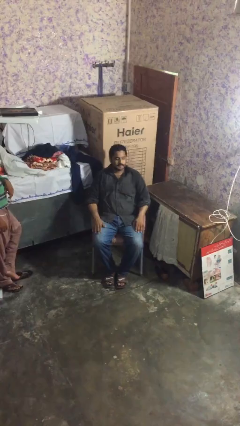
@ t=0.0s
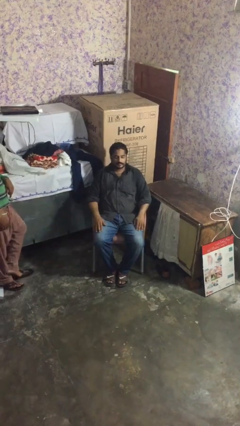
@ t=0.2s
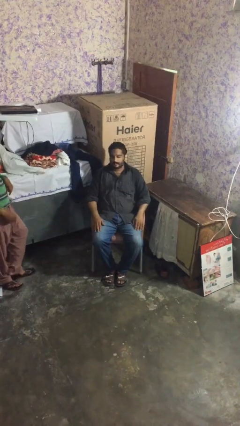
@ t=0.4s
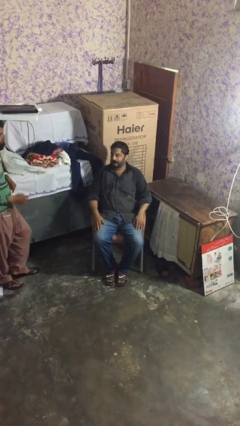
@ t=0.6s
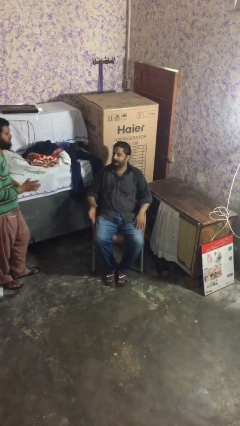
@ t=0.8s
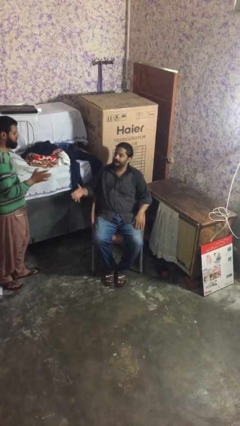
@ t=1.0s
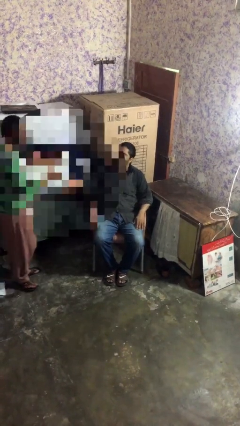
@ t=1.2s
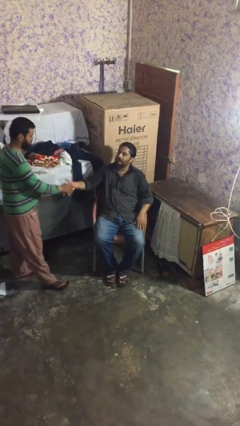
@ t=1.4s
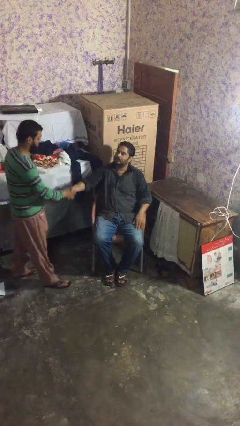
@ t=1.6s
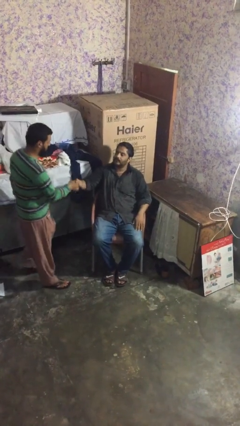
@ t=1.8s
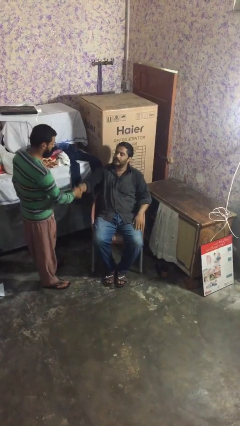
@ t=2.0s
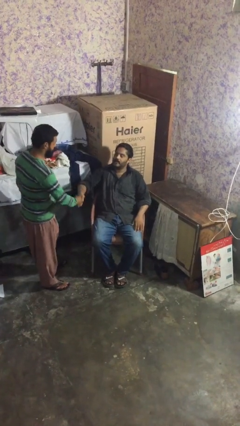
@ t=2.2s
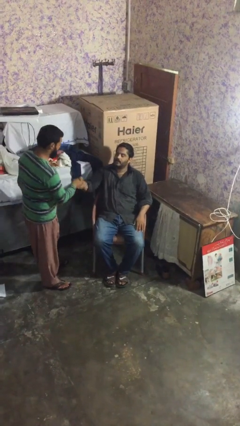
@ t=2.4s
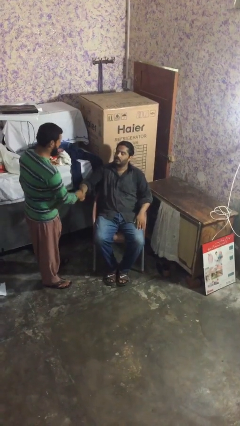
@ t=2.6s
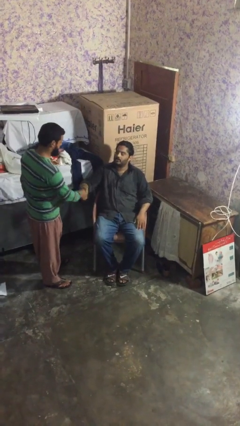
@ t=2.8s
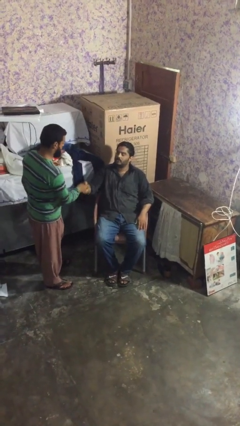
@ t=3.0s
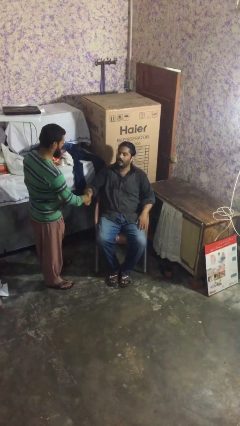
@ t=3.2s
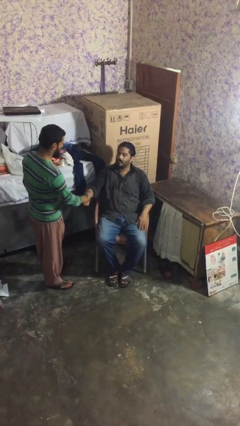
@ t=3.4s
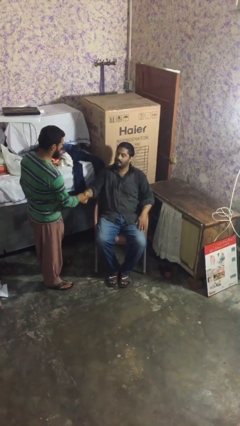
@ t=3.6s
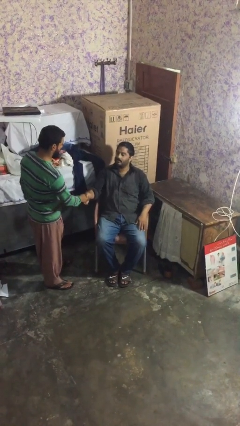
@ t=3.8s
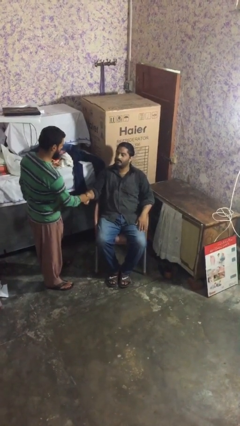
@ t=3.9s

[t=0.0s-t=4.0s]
person shakes hand

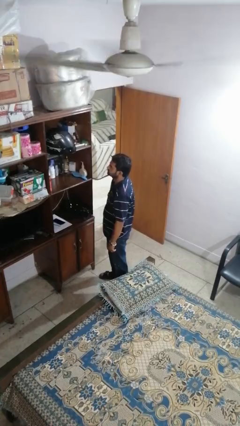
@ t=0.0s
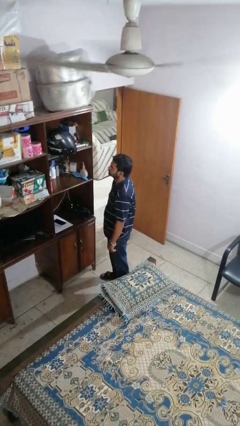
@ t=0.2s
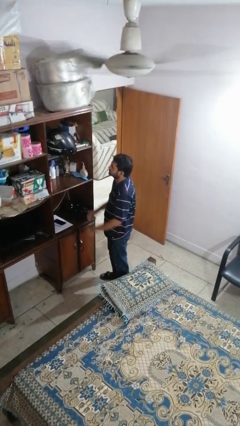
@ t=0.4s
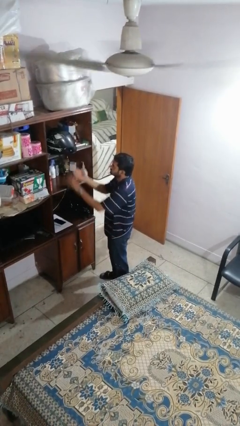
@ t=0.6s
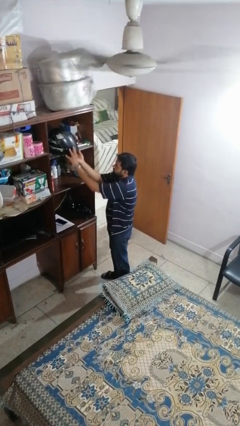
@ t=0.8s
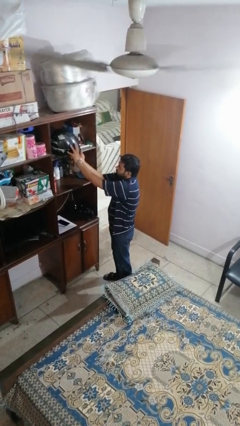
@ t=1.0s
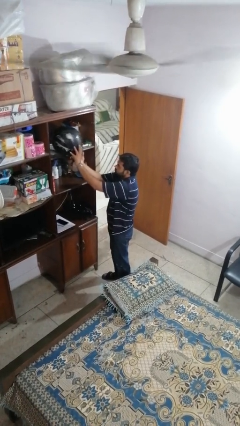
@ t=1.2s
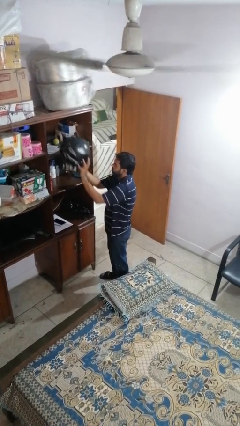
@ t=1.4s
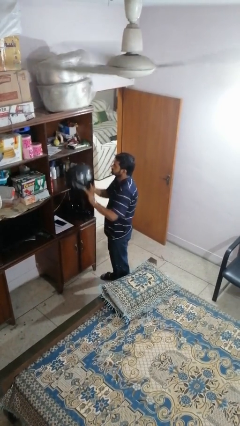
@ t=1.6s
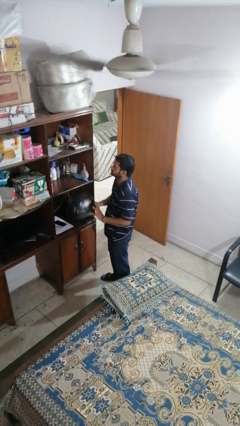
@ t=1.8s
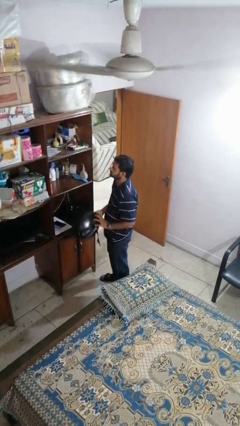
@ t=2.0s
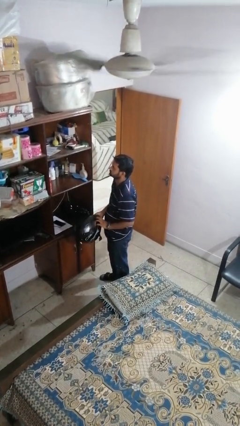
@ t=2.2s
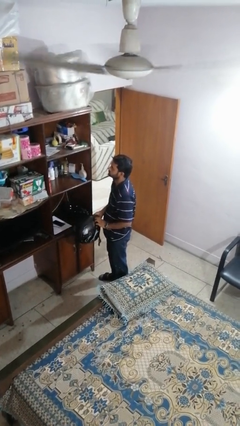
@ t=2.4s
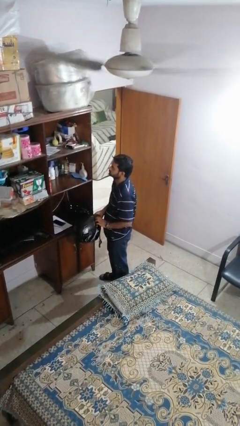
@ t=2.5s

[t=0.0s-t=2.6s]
person picks up object from shelf

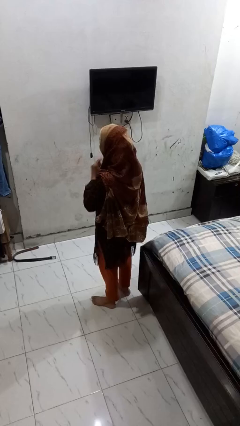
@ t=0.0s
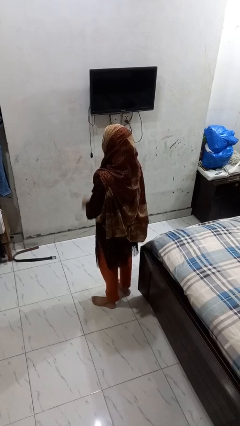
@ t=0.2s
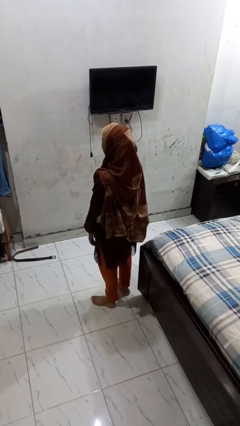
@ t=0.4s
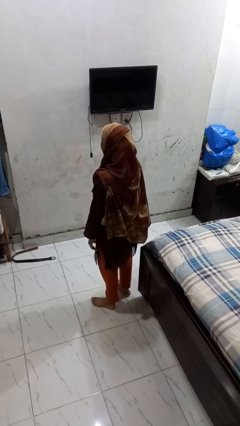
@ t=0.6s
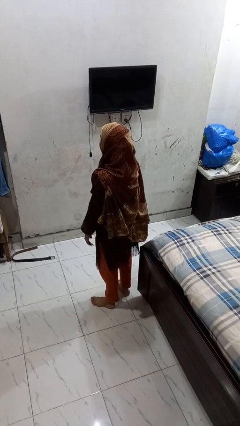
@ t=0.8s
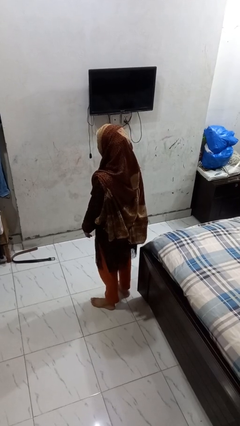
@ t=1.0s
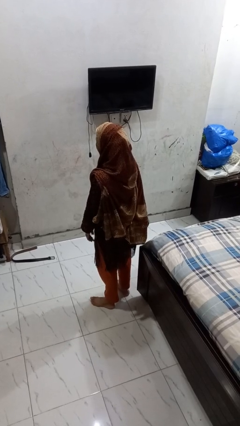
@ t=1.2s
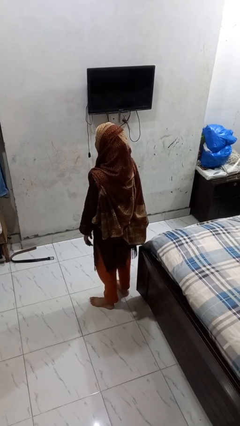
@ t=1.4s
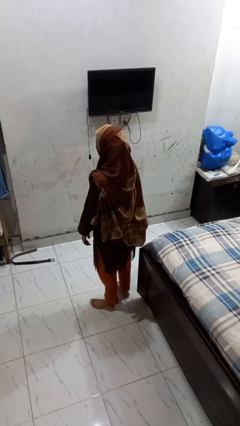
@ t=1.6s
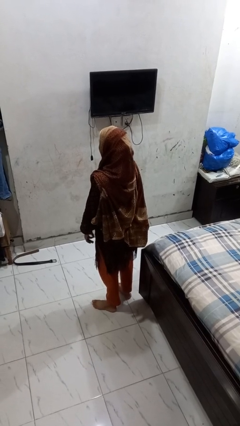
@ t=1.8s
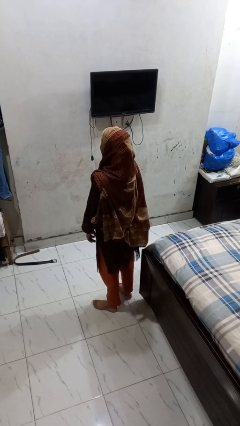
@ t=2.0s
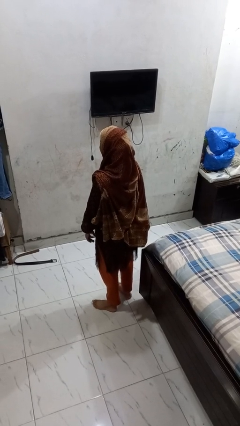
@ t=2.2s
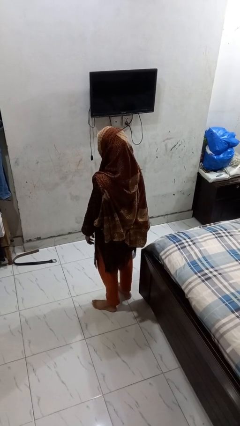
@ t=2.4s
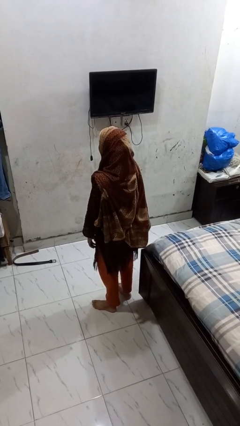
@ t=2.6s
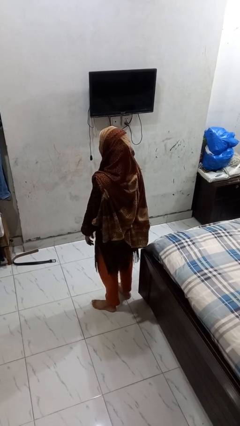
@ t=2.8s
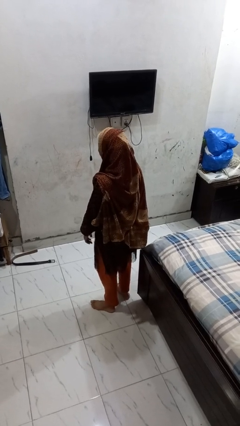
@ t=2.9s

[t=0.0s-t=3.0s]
person nods head

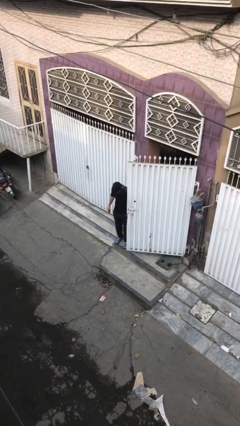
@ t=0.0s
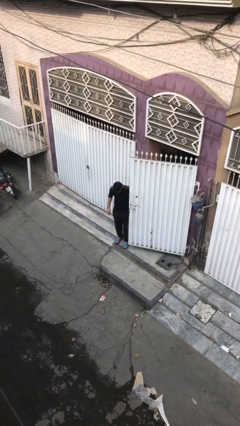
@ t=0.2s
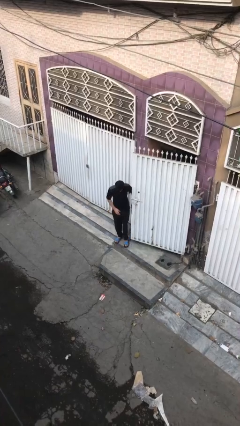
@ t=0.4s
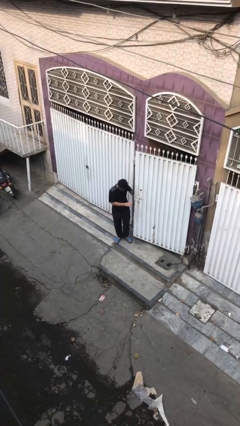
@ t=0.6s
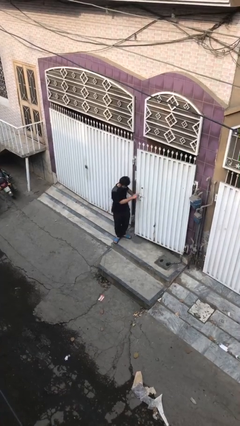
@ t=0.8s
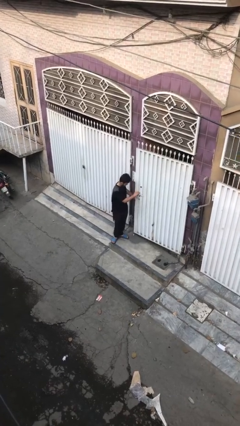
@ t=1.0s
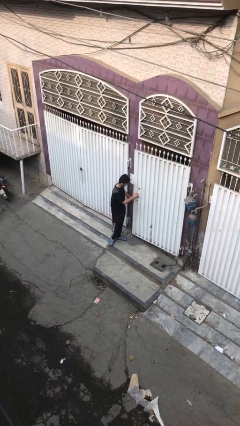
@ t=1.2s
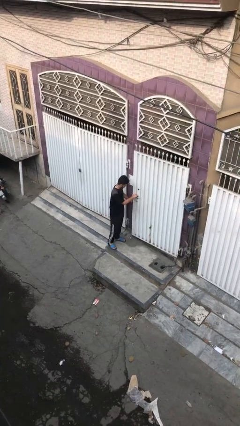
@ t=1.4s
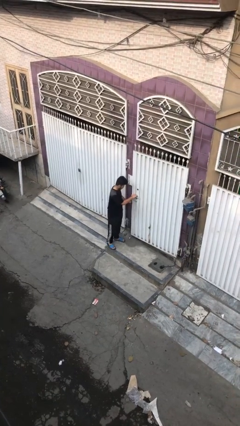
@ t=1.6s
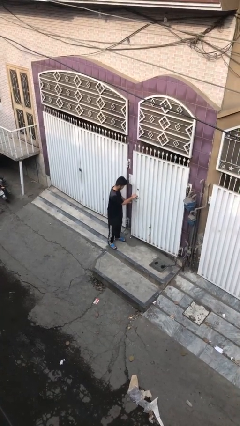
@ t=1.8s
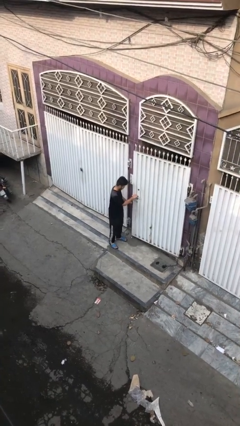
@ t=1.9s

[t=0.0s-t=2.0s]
person closes facility door

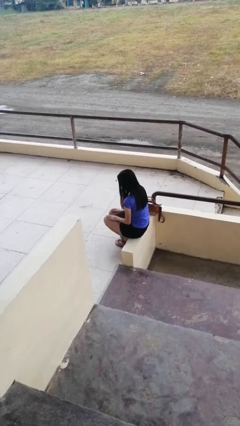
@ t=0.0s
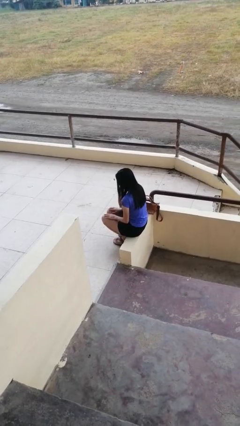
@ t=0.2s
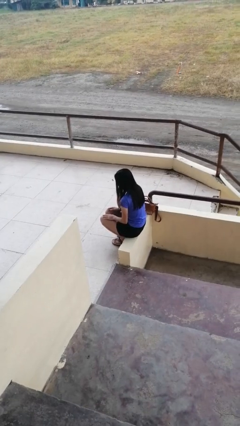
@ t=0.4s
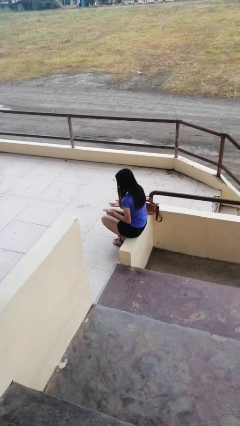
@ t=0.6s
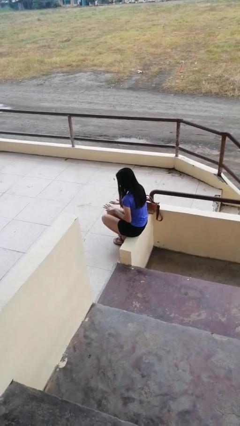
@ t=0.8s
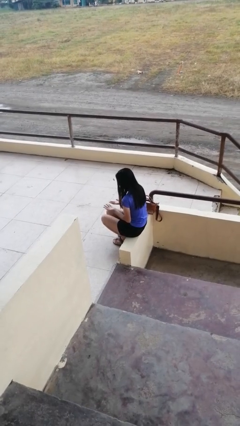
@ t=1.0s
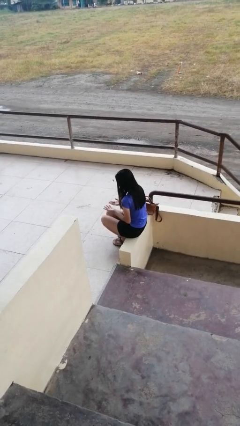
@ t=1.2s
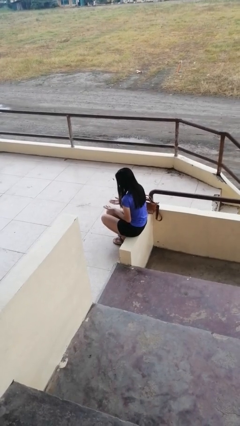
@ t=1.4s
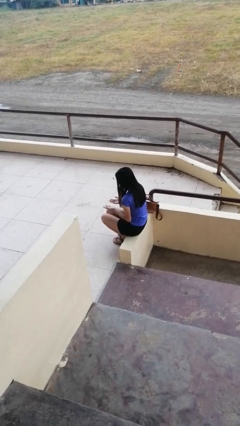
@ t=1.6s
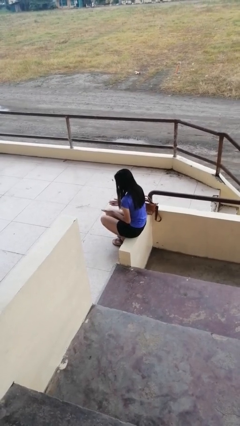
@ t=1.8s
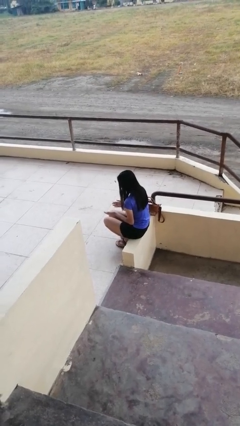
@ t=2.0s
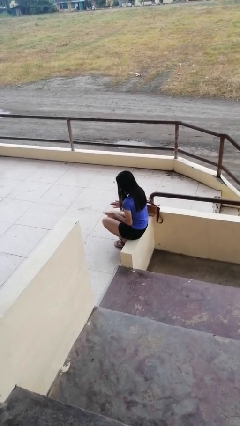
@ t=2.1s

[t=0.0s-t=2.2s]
person looks at hands in lap

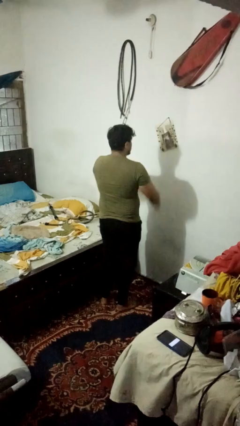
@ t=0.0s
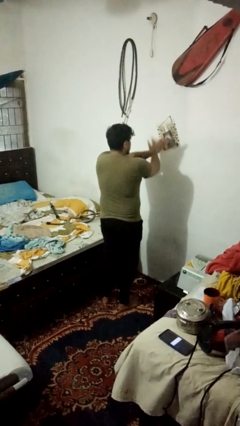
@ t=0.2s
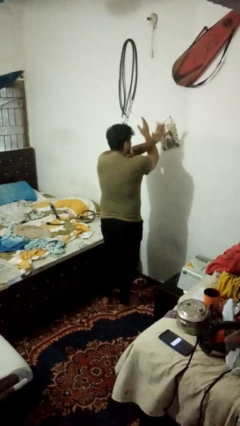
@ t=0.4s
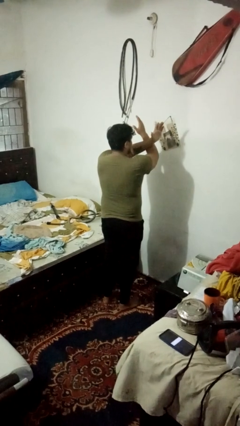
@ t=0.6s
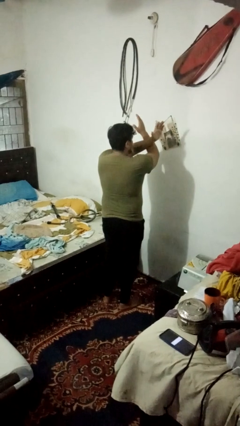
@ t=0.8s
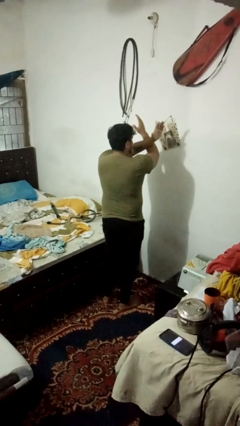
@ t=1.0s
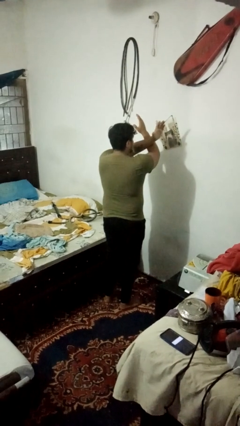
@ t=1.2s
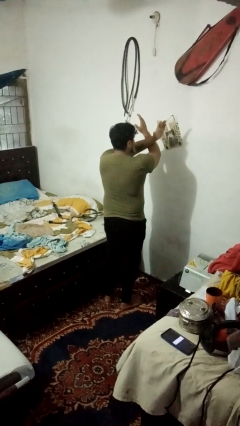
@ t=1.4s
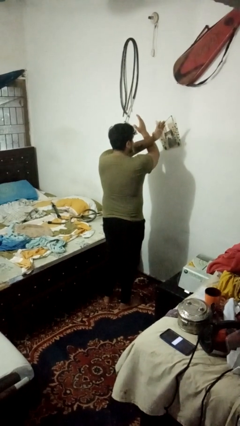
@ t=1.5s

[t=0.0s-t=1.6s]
person gestures arms x

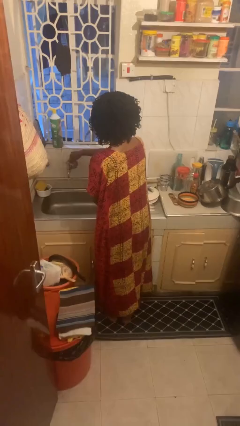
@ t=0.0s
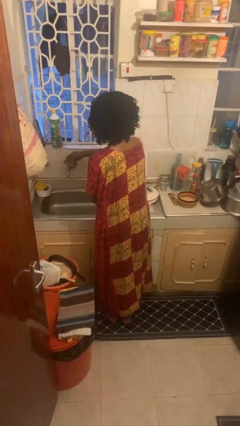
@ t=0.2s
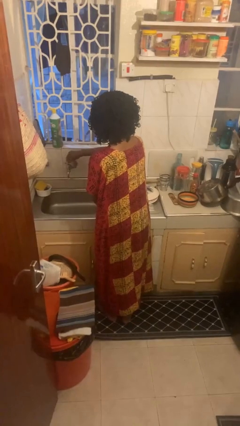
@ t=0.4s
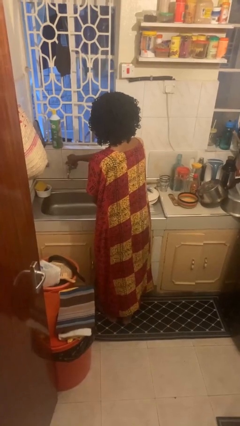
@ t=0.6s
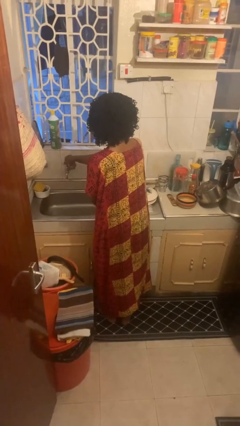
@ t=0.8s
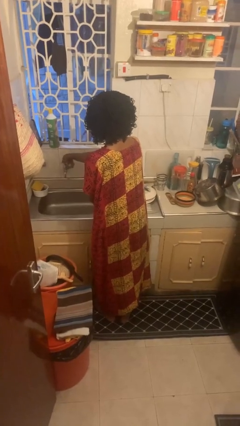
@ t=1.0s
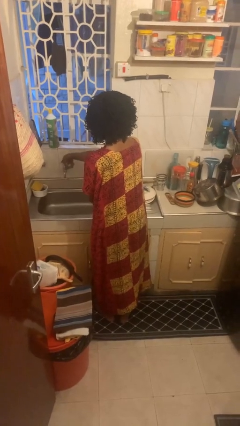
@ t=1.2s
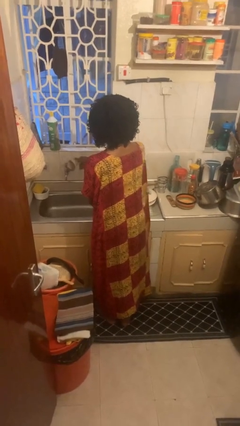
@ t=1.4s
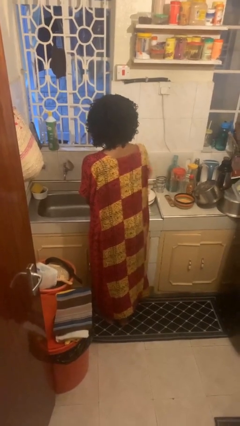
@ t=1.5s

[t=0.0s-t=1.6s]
person turns off faucet
